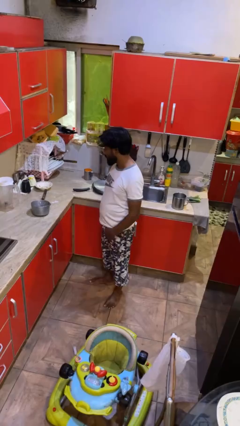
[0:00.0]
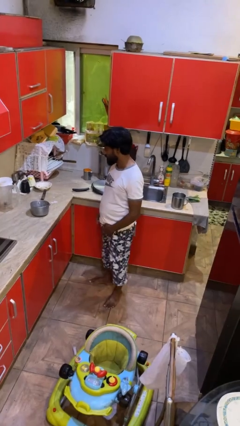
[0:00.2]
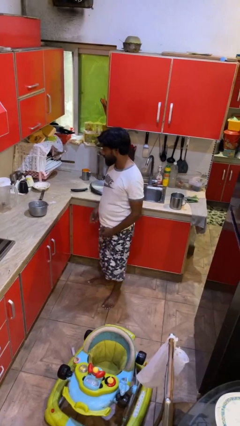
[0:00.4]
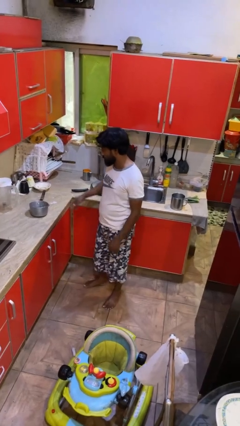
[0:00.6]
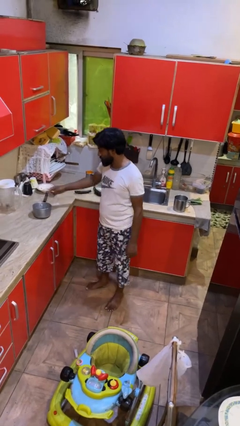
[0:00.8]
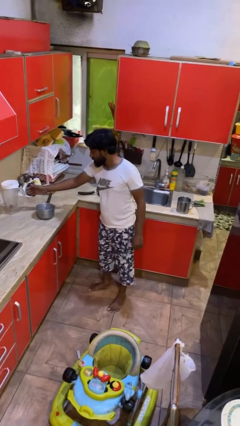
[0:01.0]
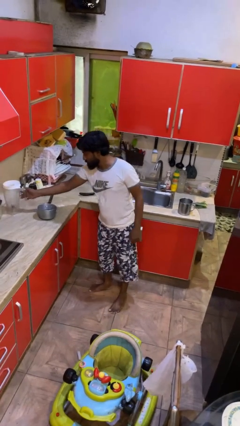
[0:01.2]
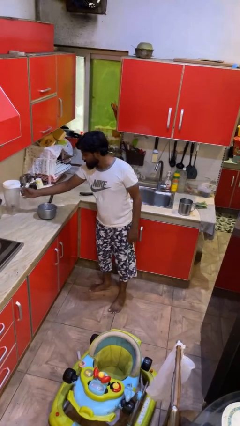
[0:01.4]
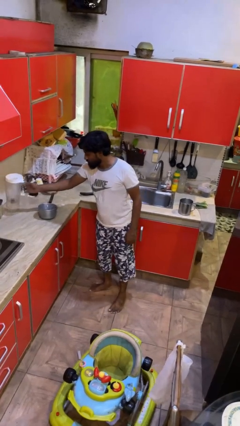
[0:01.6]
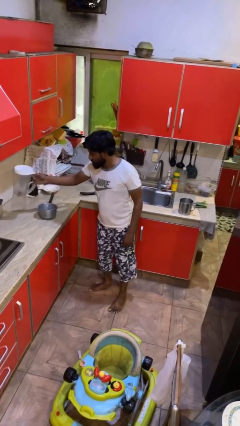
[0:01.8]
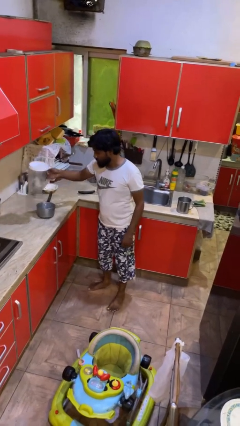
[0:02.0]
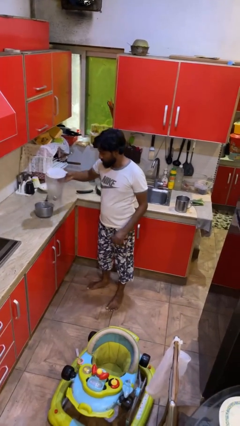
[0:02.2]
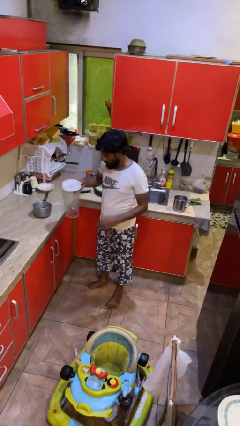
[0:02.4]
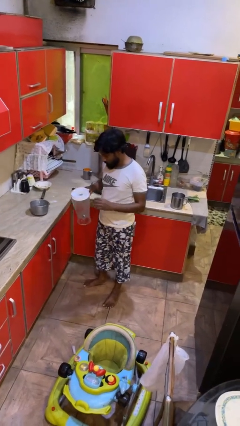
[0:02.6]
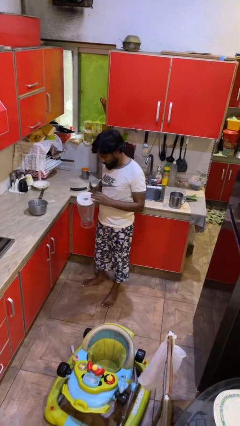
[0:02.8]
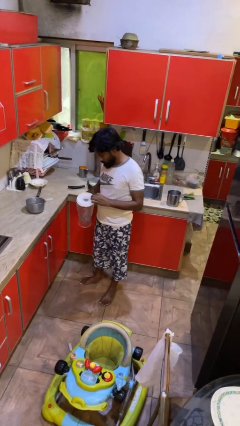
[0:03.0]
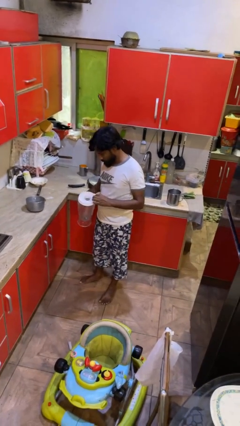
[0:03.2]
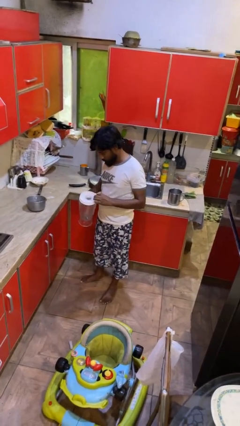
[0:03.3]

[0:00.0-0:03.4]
person picks up object from countertop

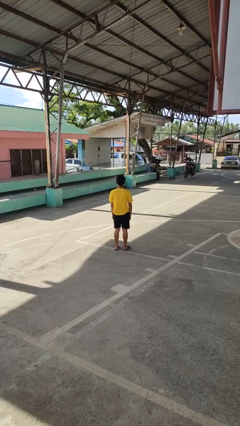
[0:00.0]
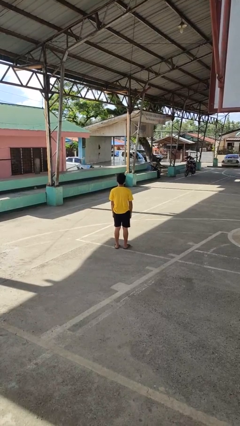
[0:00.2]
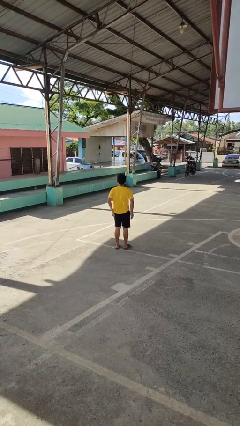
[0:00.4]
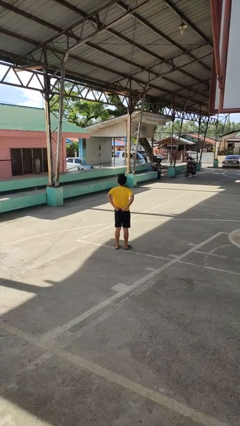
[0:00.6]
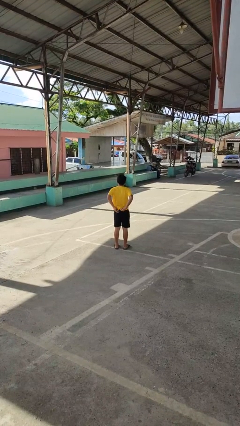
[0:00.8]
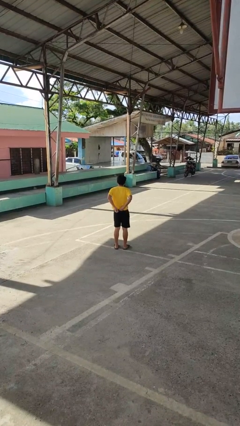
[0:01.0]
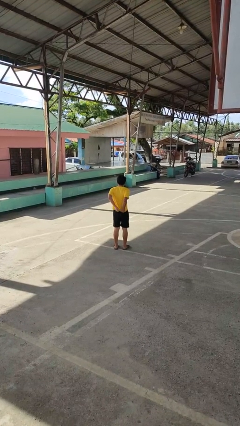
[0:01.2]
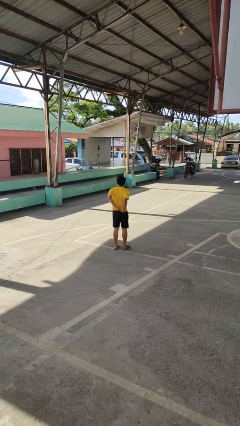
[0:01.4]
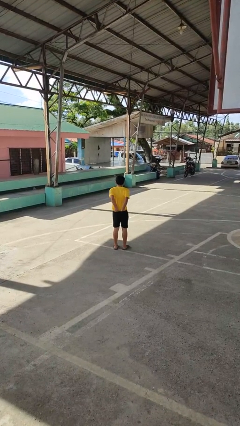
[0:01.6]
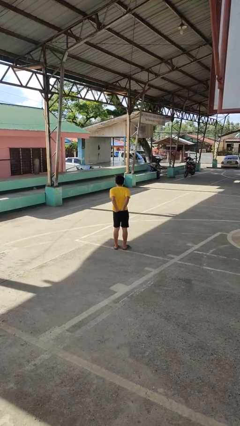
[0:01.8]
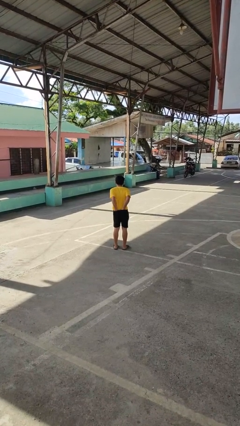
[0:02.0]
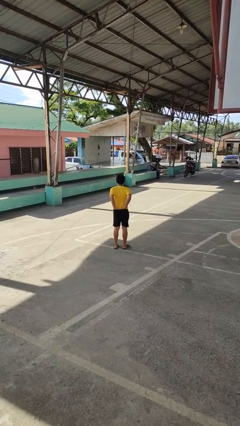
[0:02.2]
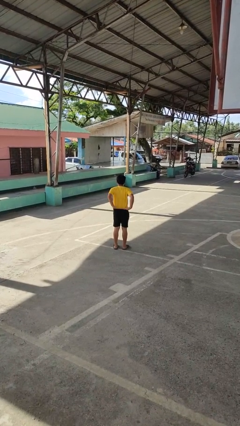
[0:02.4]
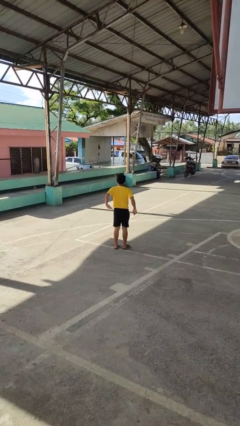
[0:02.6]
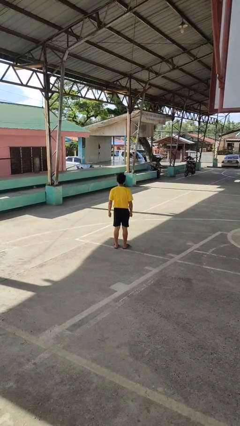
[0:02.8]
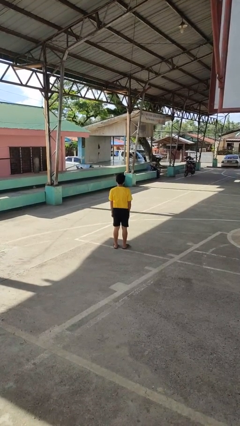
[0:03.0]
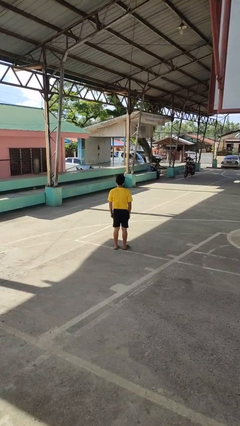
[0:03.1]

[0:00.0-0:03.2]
person tucks in shirt

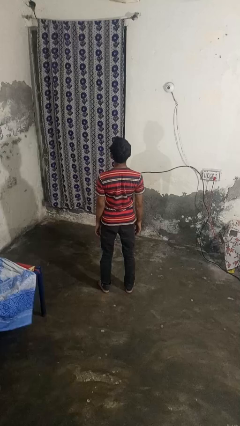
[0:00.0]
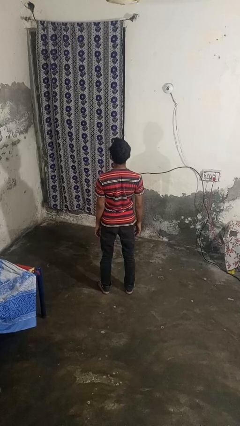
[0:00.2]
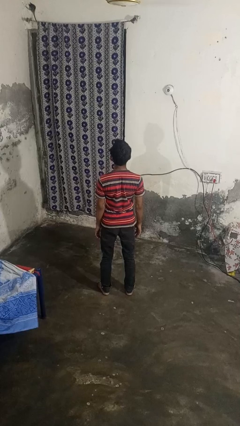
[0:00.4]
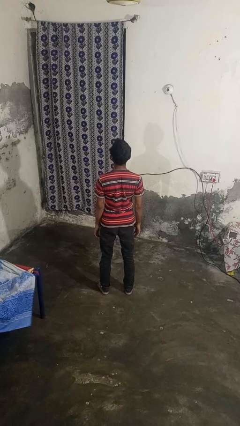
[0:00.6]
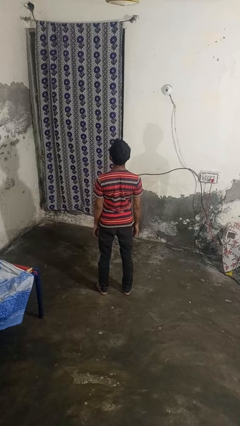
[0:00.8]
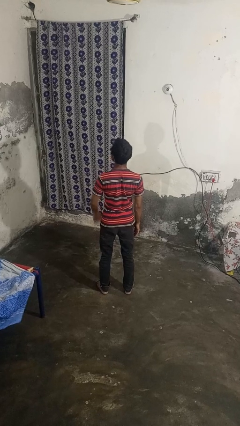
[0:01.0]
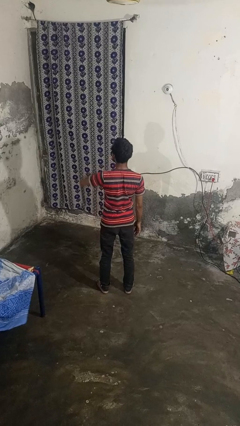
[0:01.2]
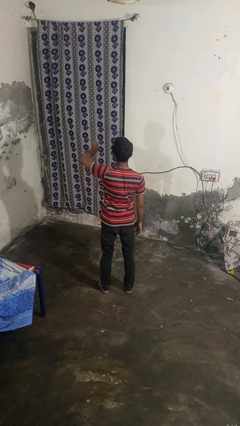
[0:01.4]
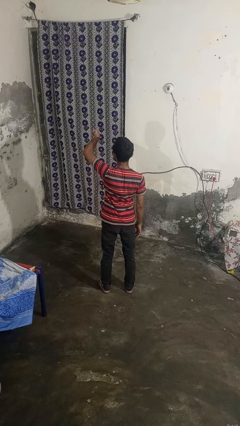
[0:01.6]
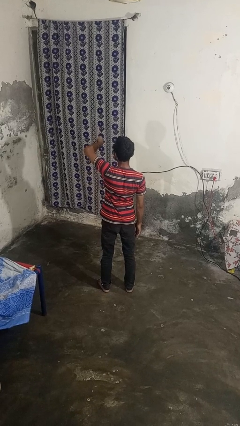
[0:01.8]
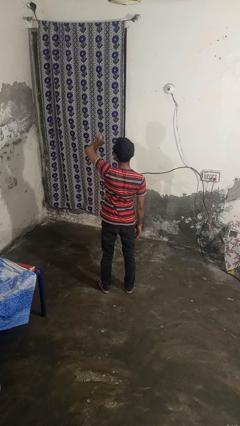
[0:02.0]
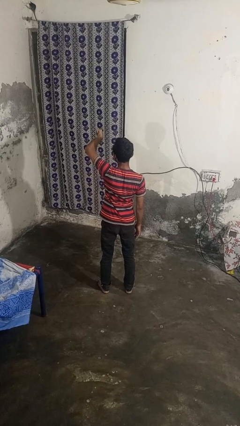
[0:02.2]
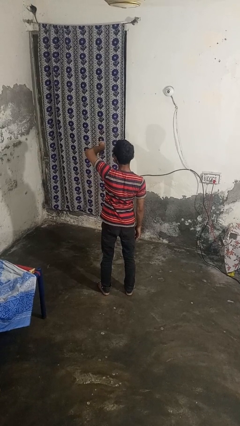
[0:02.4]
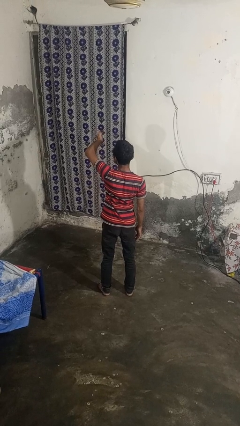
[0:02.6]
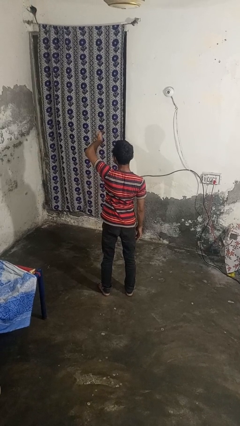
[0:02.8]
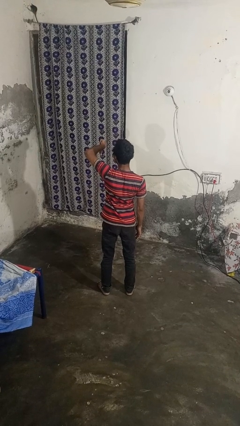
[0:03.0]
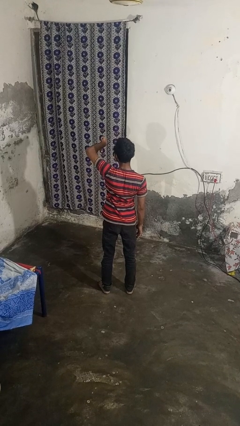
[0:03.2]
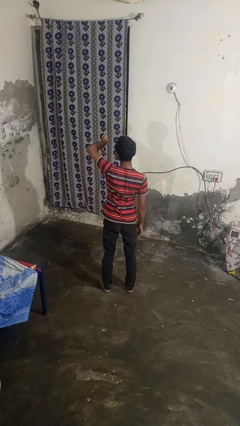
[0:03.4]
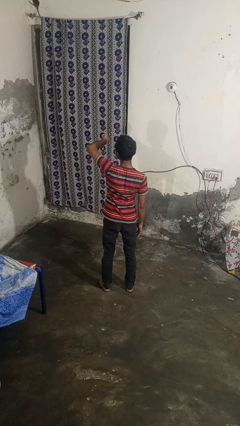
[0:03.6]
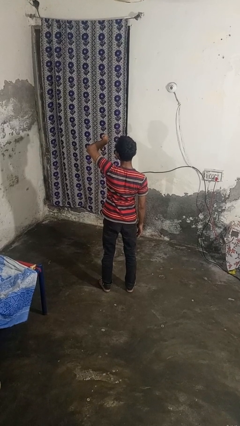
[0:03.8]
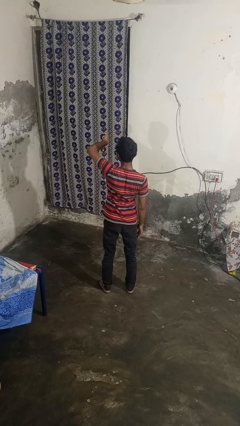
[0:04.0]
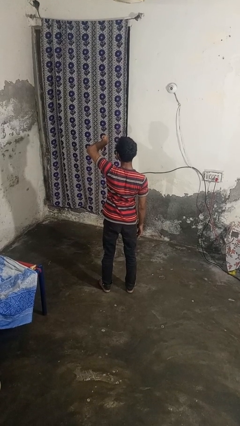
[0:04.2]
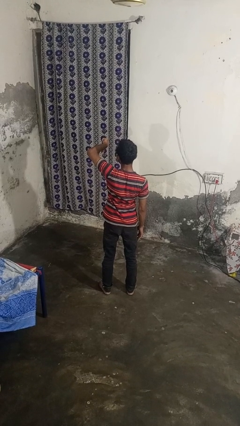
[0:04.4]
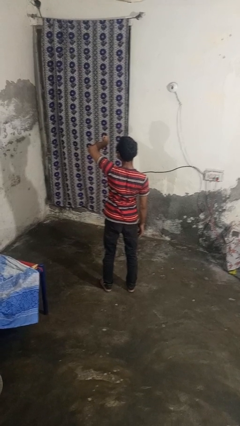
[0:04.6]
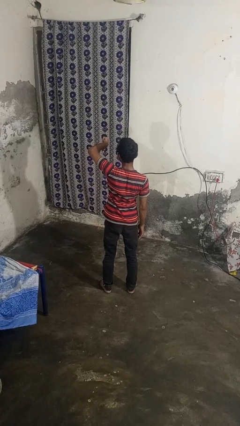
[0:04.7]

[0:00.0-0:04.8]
person gestures thumbs down

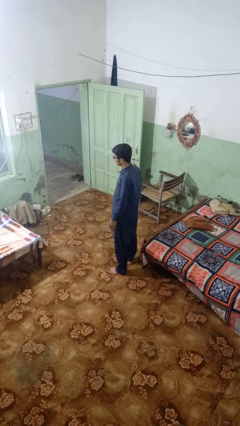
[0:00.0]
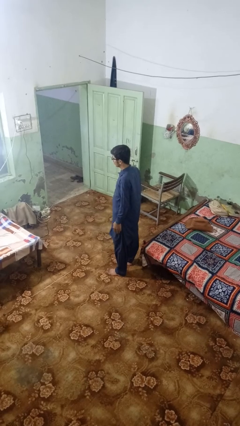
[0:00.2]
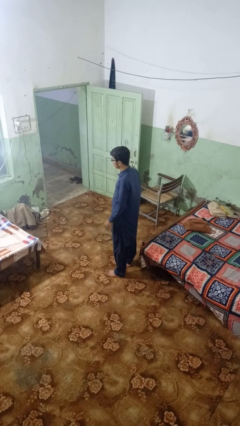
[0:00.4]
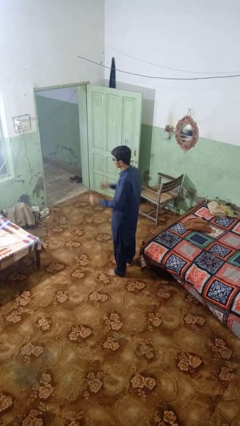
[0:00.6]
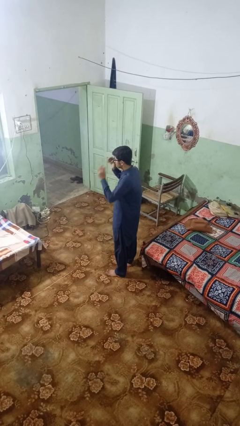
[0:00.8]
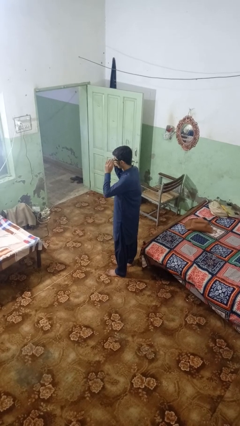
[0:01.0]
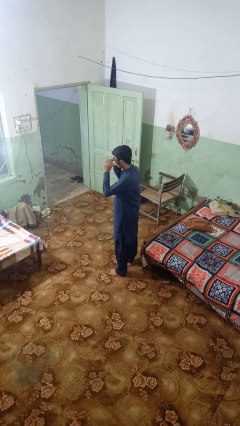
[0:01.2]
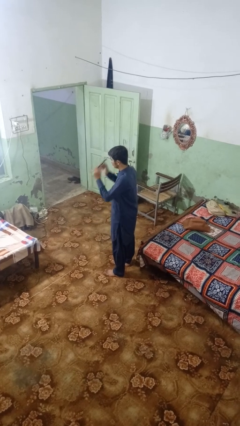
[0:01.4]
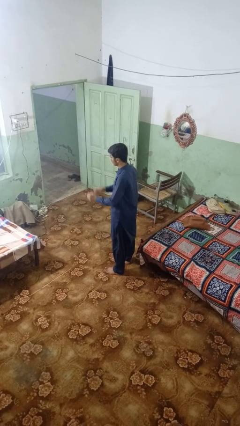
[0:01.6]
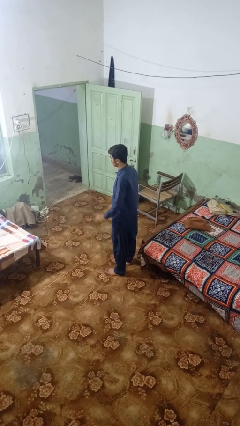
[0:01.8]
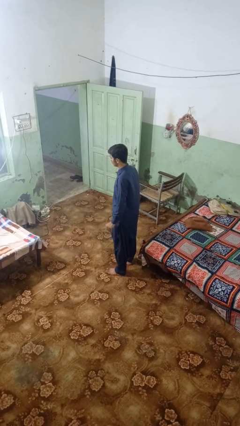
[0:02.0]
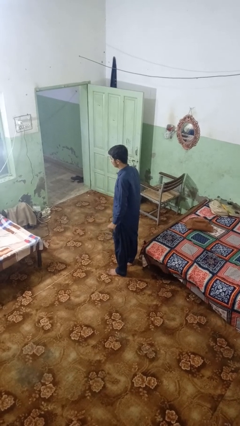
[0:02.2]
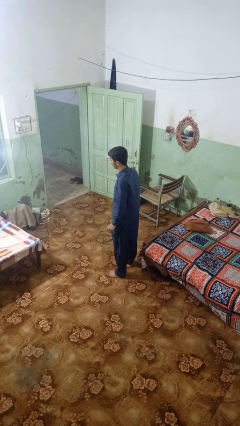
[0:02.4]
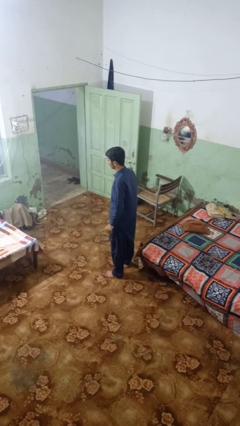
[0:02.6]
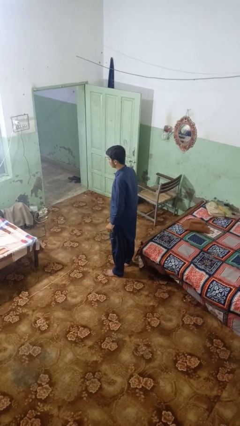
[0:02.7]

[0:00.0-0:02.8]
person takes off glasses

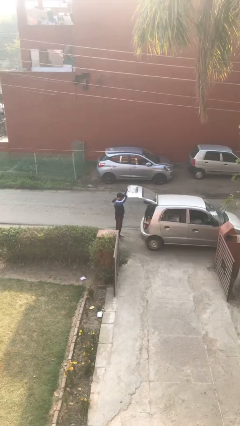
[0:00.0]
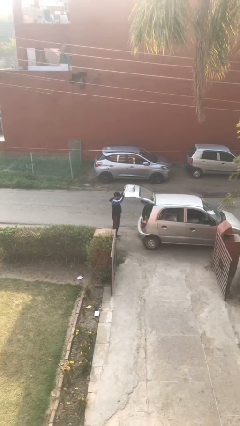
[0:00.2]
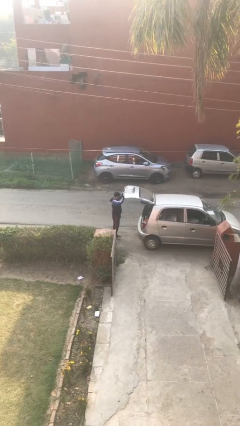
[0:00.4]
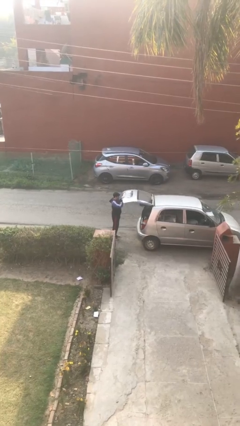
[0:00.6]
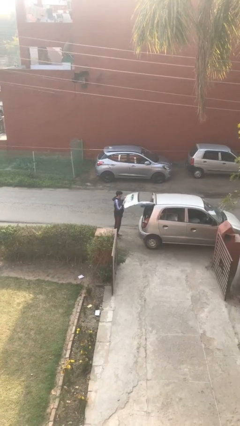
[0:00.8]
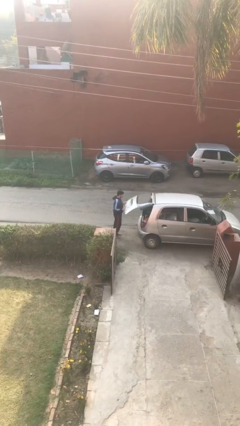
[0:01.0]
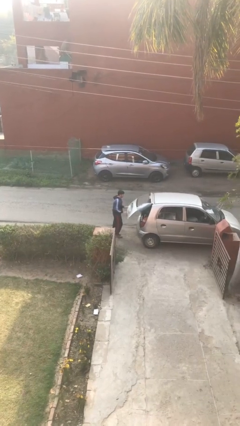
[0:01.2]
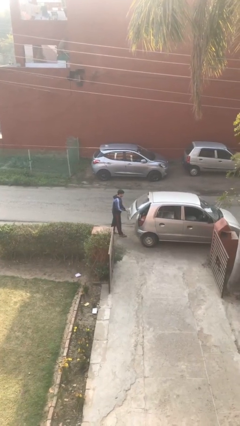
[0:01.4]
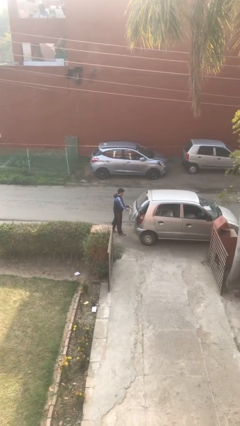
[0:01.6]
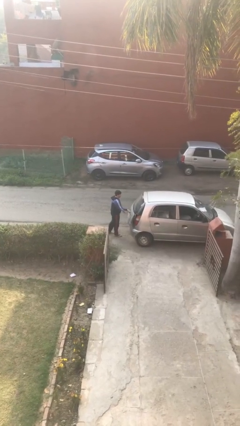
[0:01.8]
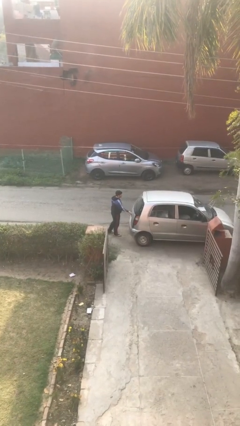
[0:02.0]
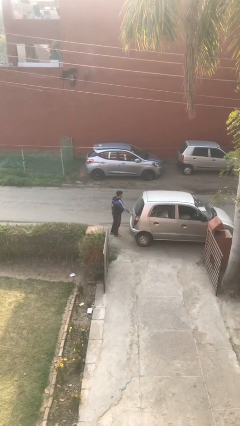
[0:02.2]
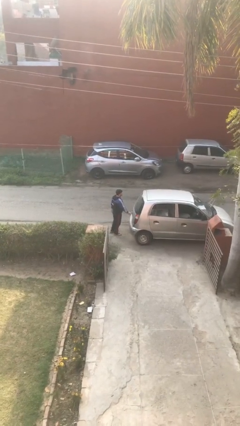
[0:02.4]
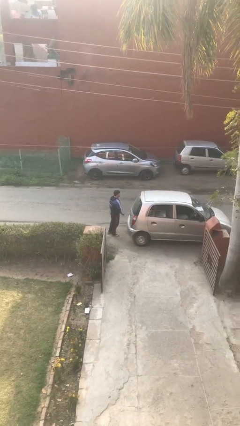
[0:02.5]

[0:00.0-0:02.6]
person closes car trunk

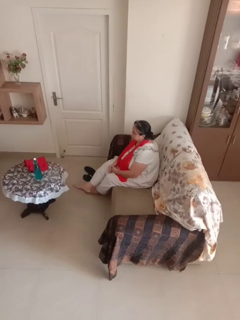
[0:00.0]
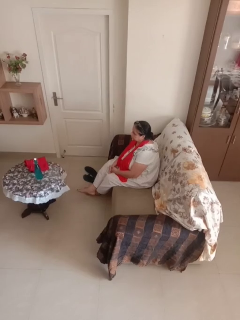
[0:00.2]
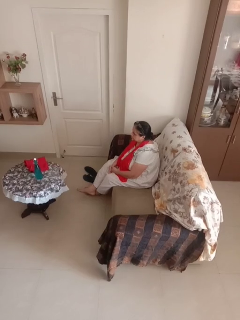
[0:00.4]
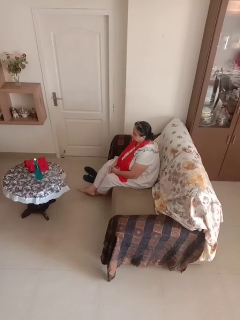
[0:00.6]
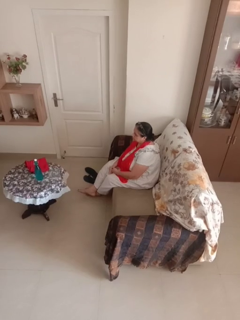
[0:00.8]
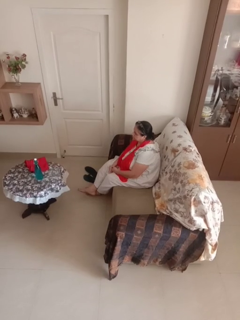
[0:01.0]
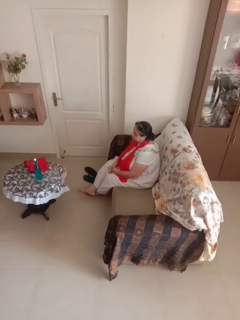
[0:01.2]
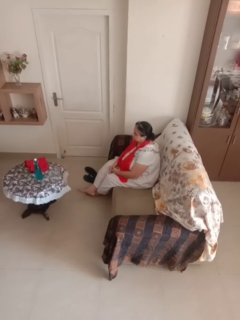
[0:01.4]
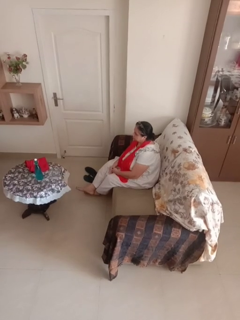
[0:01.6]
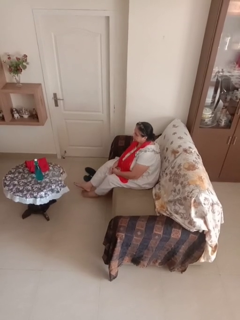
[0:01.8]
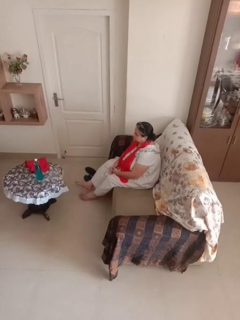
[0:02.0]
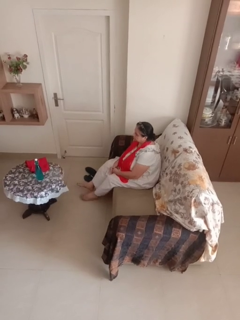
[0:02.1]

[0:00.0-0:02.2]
person crosses legs